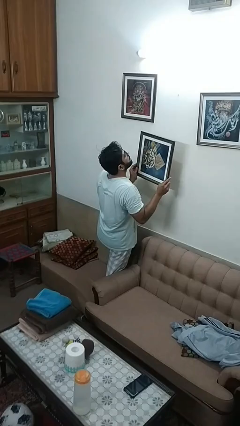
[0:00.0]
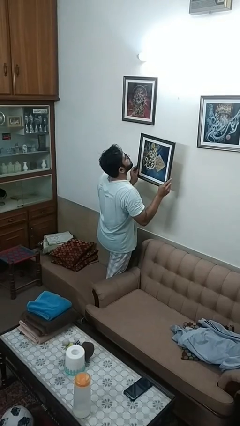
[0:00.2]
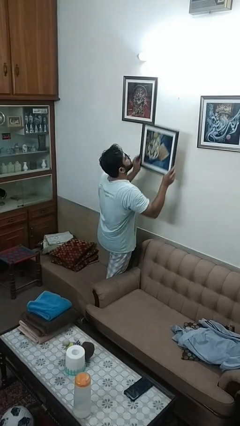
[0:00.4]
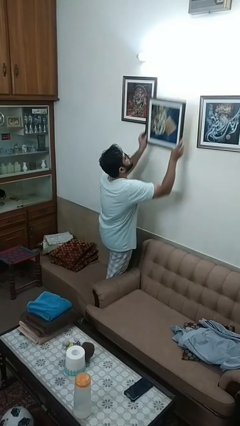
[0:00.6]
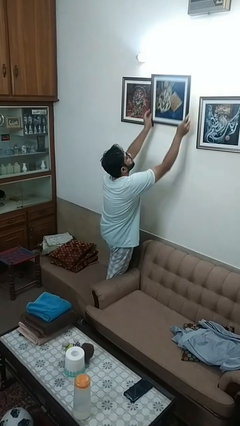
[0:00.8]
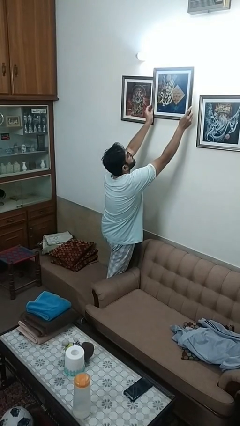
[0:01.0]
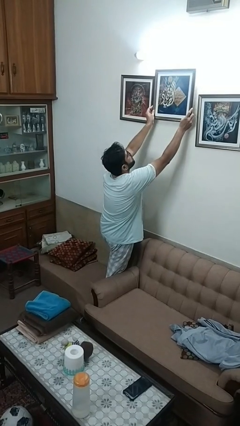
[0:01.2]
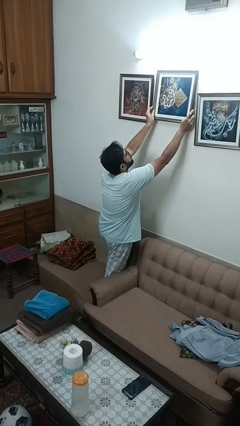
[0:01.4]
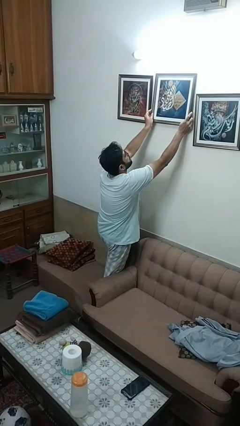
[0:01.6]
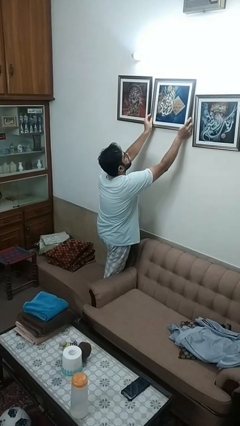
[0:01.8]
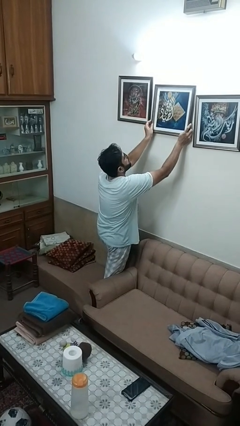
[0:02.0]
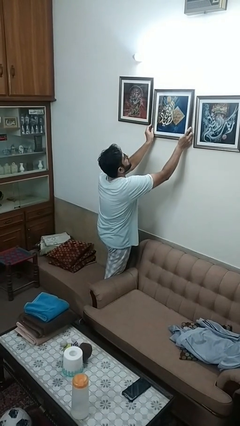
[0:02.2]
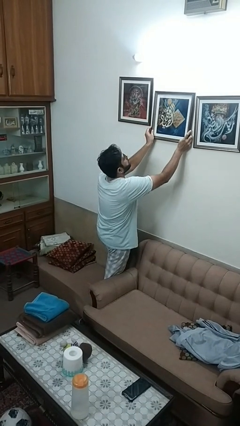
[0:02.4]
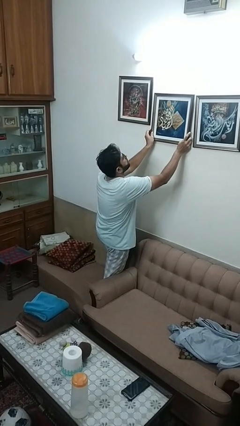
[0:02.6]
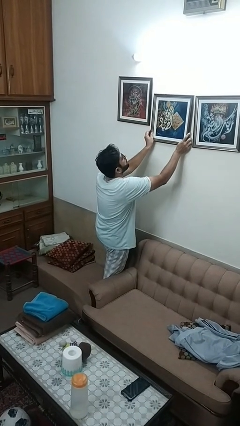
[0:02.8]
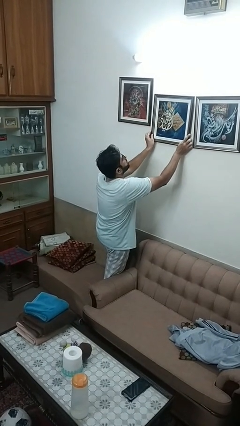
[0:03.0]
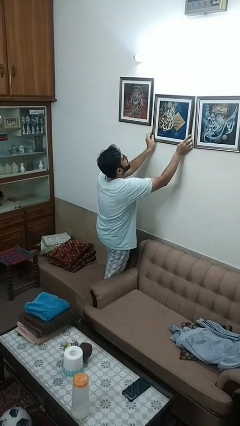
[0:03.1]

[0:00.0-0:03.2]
person puts up picture frame

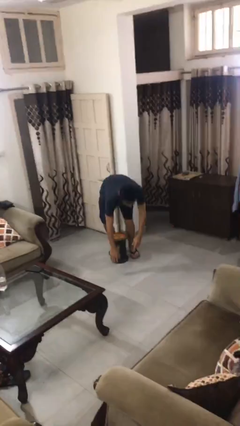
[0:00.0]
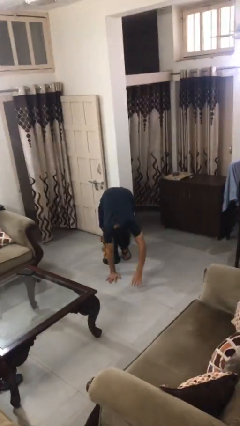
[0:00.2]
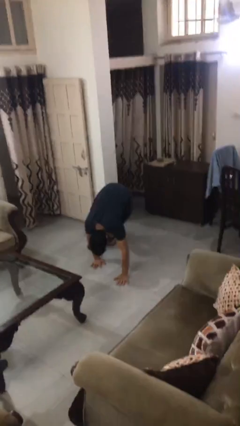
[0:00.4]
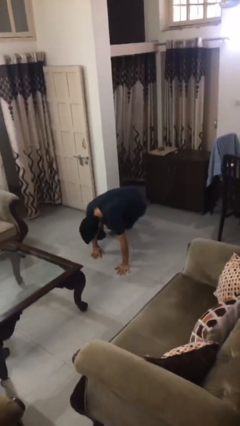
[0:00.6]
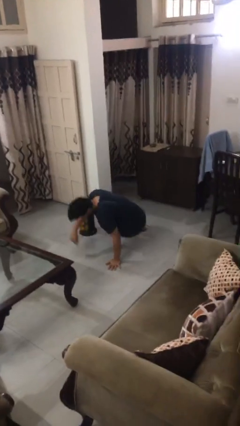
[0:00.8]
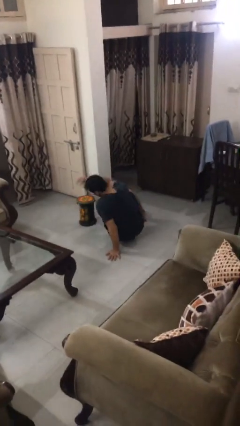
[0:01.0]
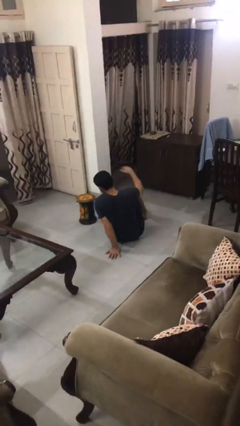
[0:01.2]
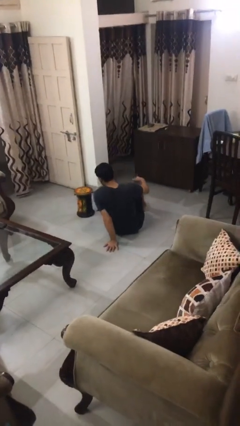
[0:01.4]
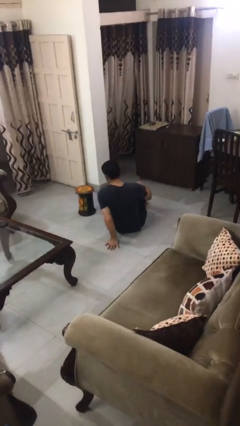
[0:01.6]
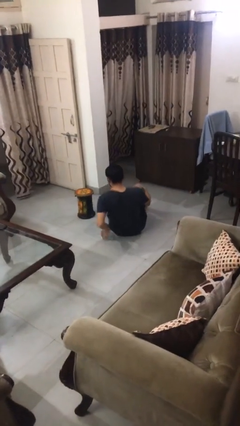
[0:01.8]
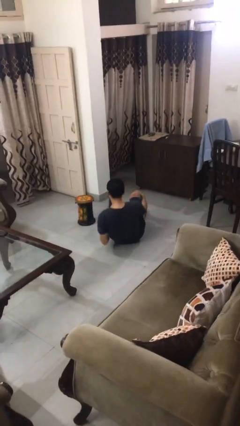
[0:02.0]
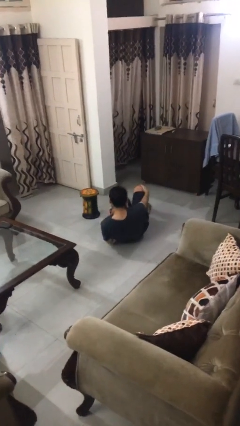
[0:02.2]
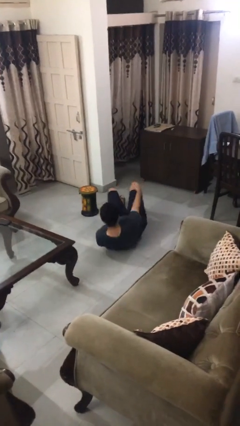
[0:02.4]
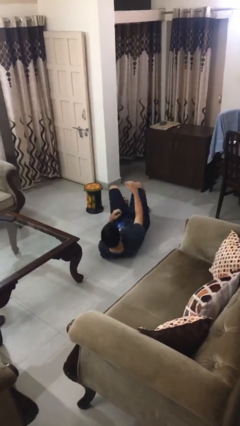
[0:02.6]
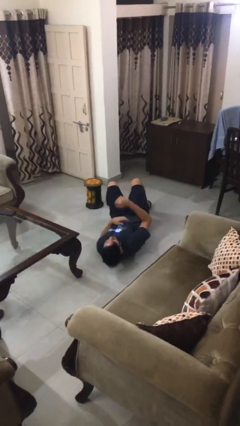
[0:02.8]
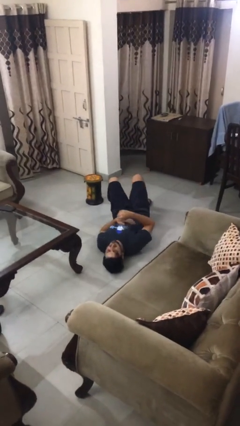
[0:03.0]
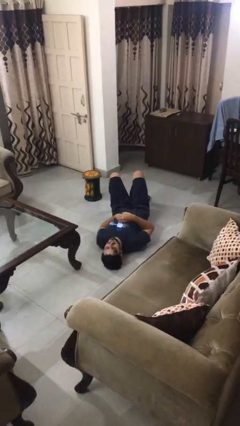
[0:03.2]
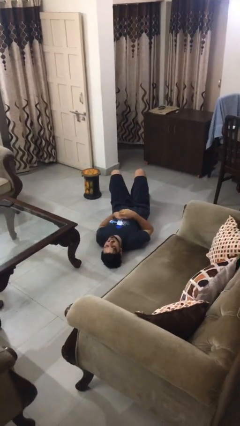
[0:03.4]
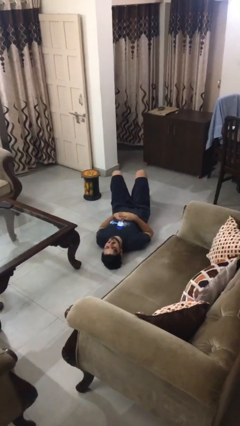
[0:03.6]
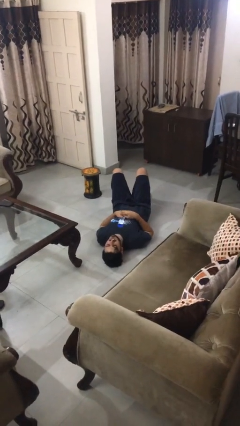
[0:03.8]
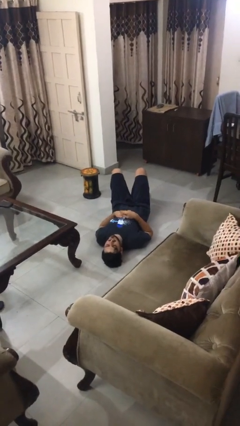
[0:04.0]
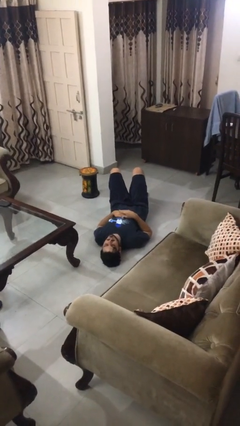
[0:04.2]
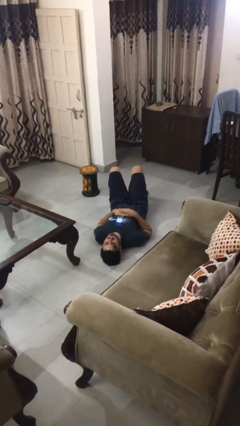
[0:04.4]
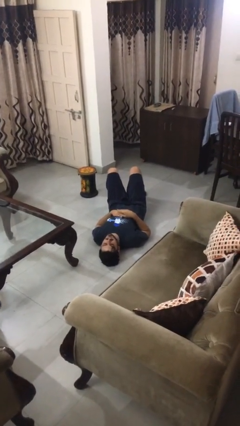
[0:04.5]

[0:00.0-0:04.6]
person lies down on floor

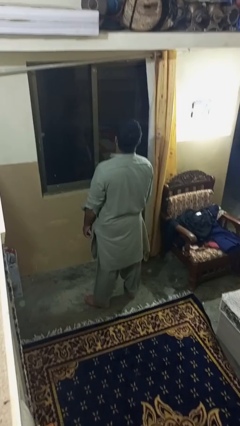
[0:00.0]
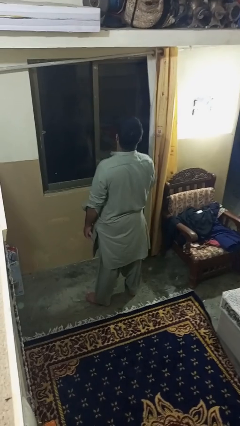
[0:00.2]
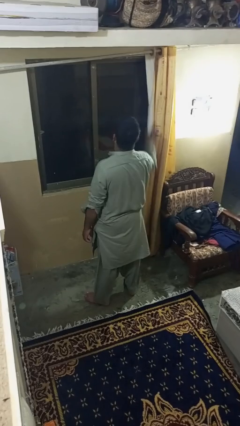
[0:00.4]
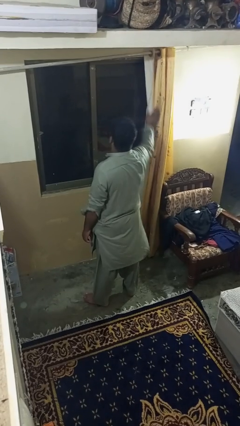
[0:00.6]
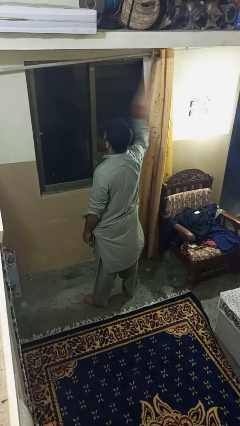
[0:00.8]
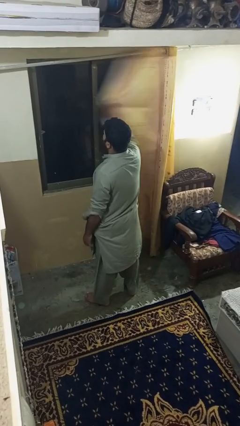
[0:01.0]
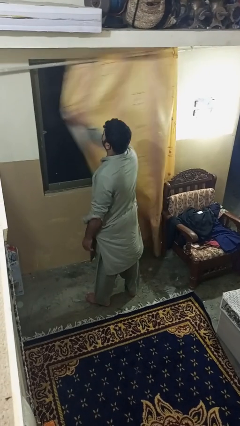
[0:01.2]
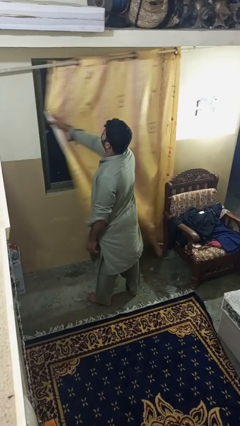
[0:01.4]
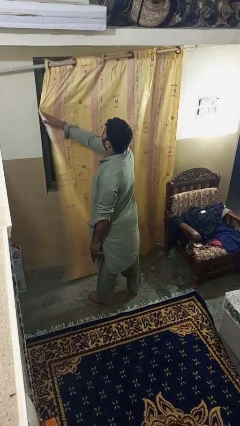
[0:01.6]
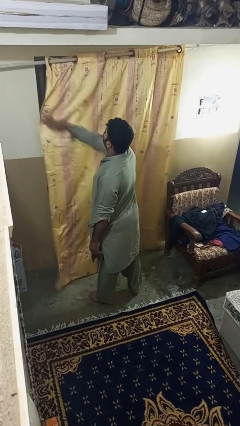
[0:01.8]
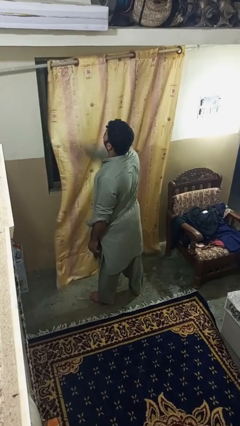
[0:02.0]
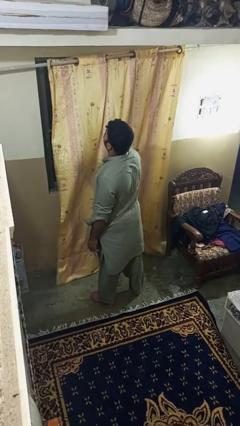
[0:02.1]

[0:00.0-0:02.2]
person closes curtains

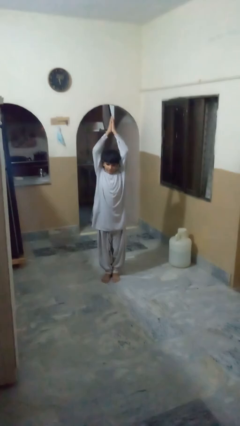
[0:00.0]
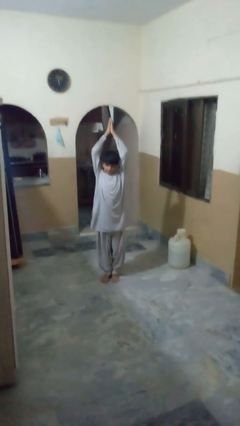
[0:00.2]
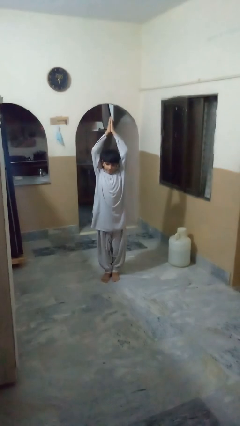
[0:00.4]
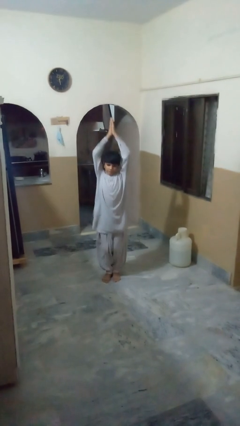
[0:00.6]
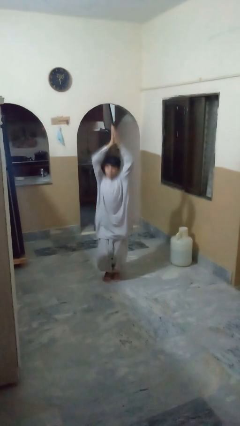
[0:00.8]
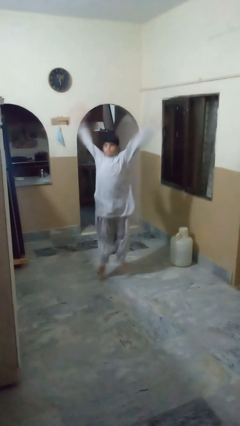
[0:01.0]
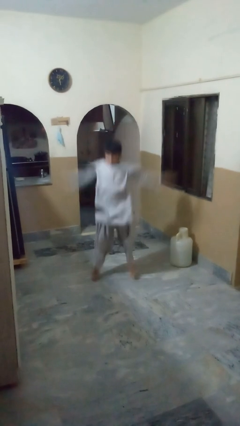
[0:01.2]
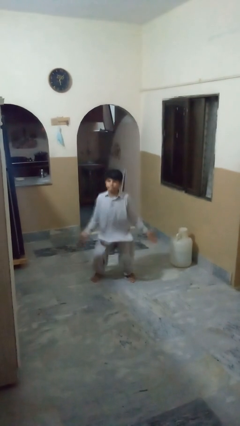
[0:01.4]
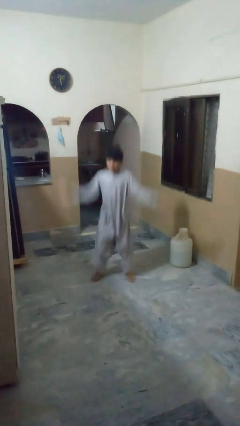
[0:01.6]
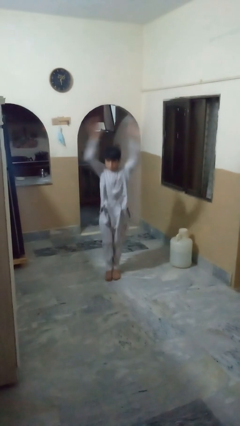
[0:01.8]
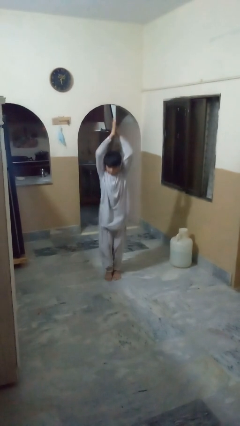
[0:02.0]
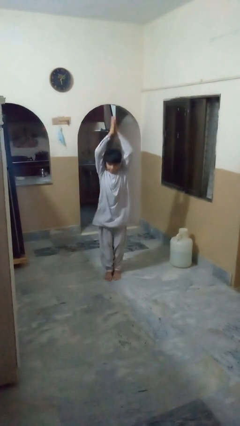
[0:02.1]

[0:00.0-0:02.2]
person exercises with jumping jacks

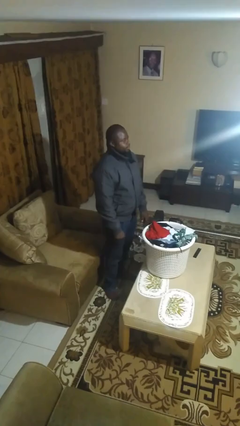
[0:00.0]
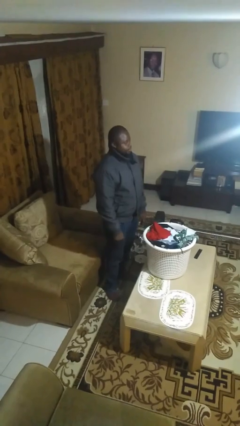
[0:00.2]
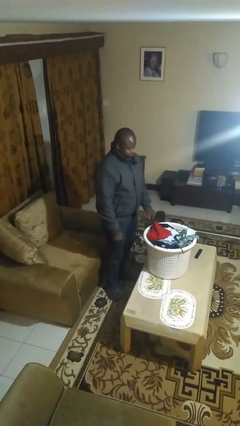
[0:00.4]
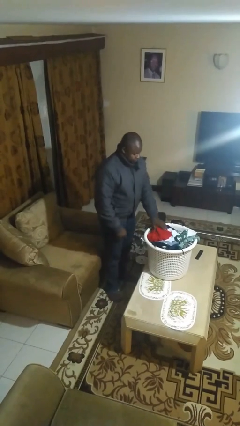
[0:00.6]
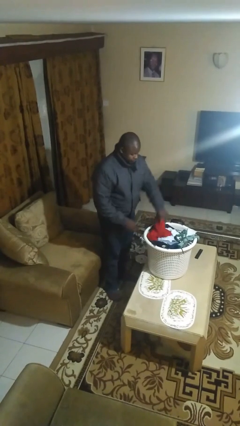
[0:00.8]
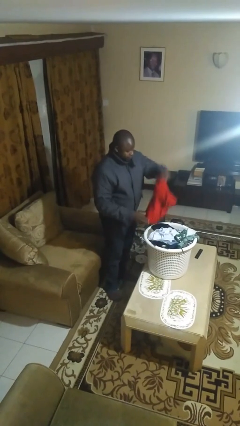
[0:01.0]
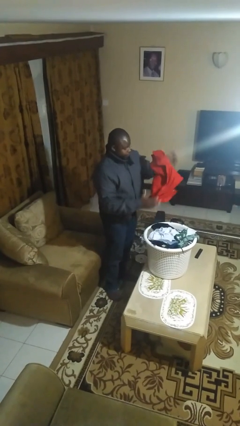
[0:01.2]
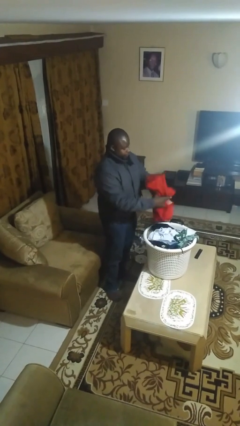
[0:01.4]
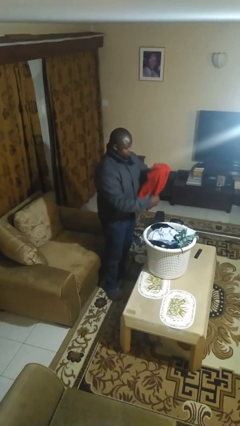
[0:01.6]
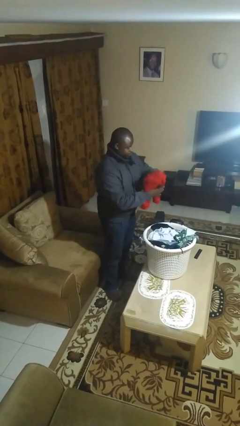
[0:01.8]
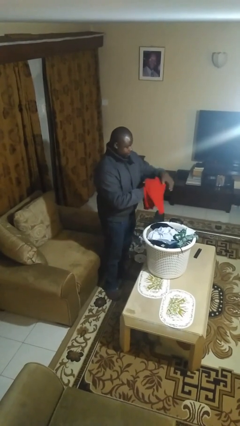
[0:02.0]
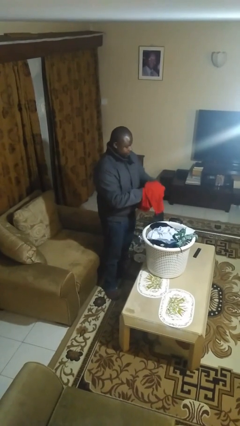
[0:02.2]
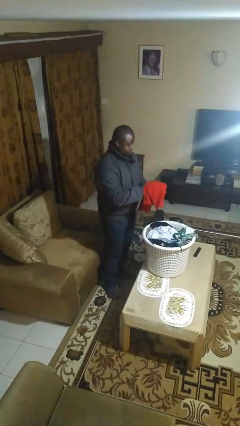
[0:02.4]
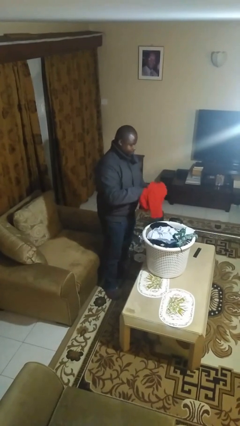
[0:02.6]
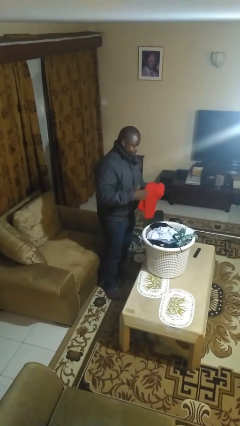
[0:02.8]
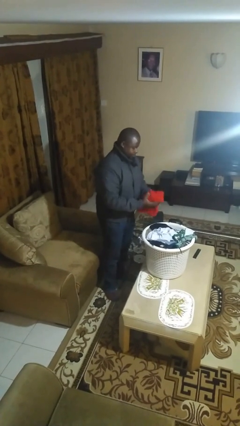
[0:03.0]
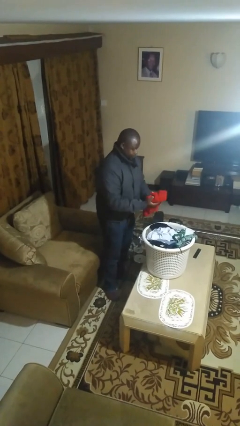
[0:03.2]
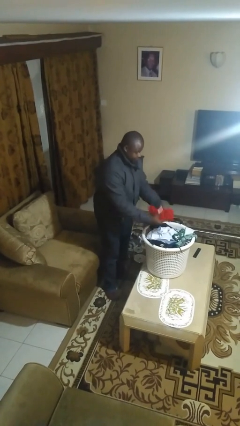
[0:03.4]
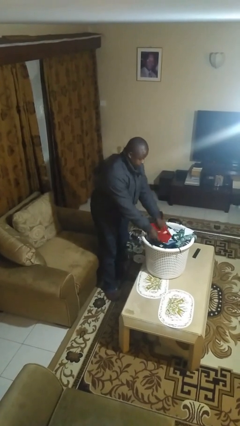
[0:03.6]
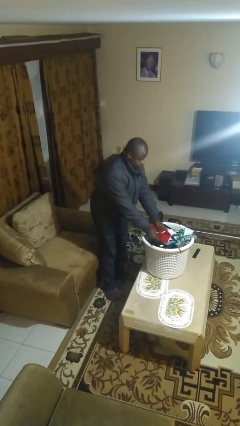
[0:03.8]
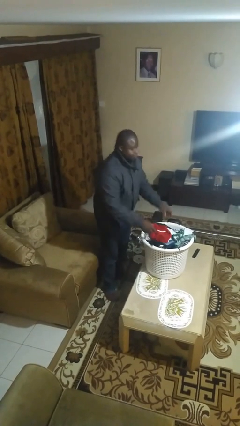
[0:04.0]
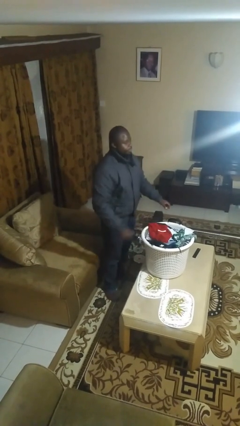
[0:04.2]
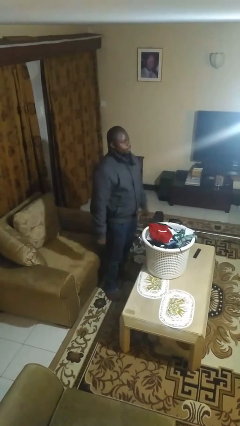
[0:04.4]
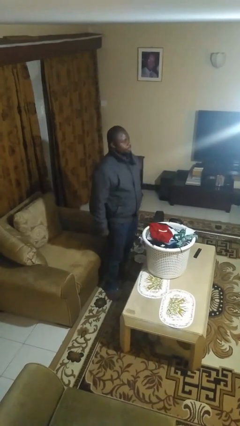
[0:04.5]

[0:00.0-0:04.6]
person folds shirt

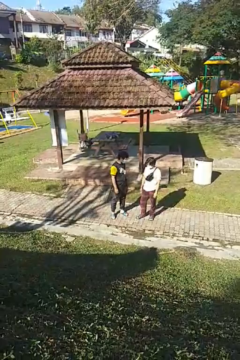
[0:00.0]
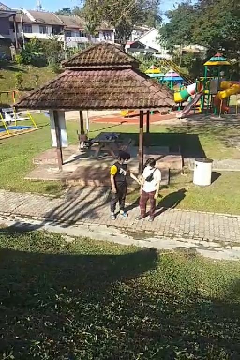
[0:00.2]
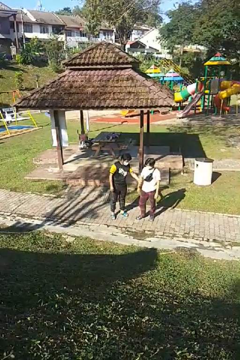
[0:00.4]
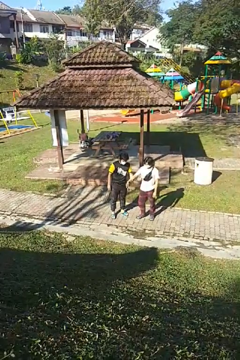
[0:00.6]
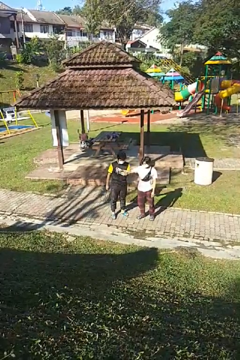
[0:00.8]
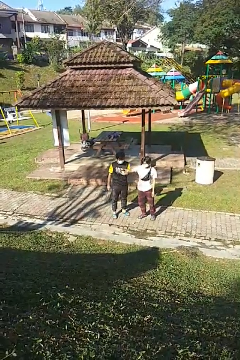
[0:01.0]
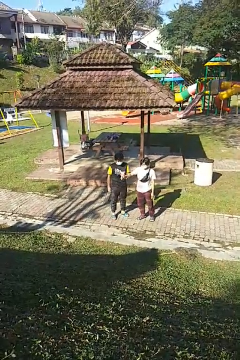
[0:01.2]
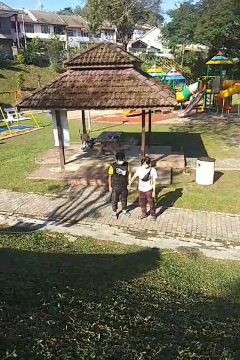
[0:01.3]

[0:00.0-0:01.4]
person grabs person by forearm
